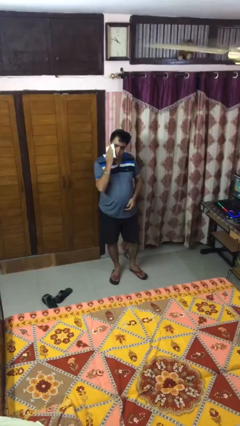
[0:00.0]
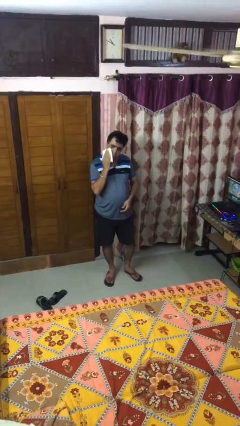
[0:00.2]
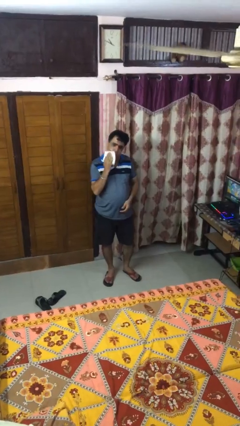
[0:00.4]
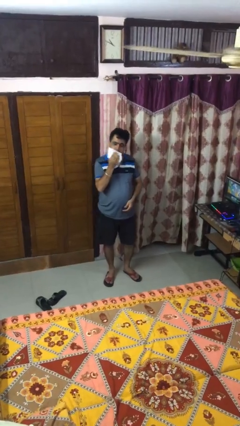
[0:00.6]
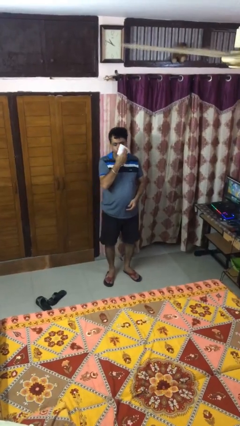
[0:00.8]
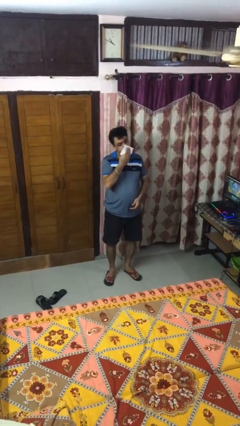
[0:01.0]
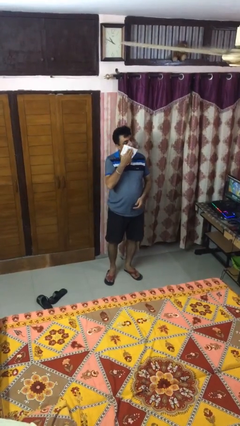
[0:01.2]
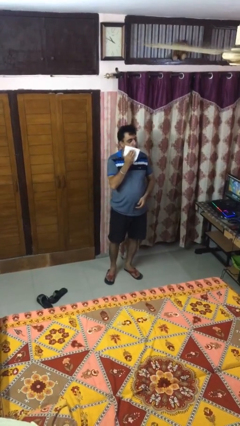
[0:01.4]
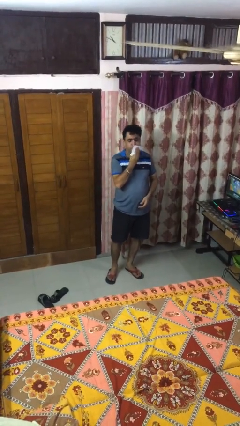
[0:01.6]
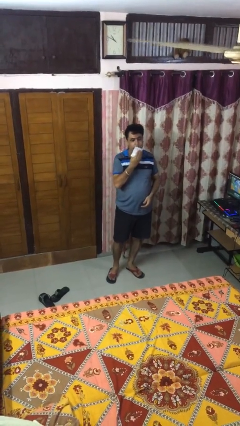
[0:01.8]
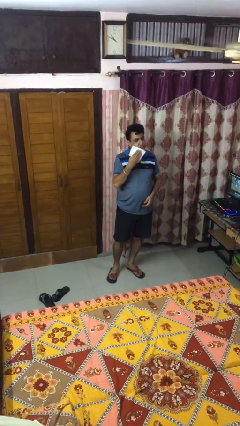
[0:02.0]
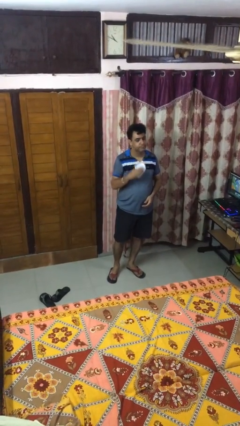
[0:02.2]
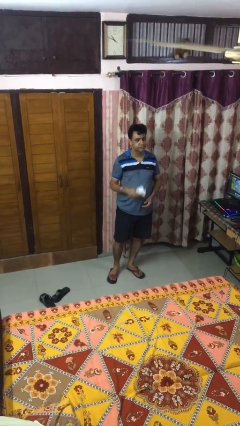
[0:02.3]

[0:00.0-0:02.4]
person wipes mouth with napkin

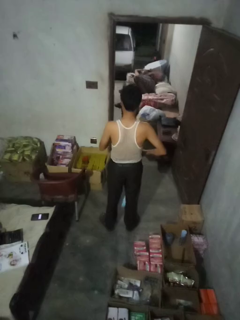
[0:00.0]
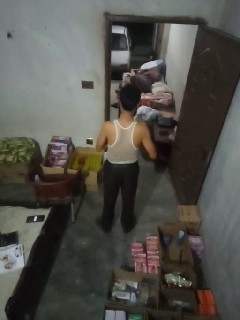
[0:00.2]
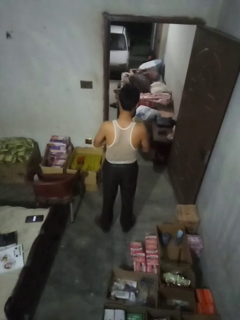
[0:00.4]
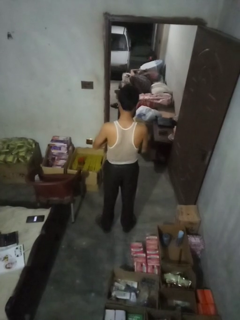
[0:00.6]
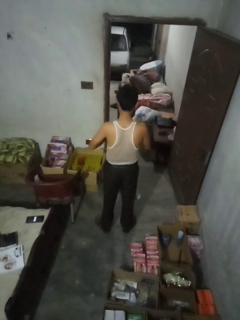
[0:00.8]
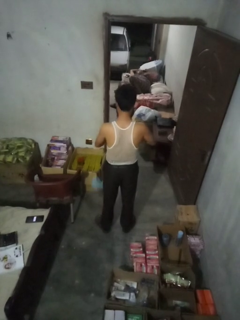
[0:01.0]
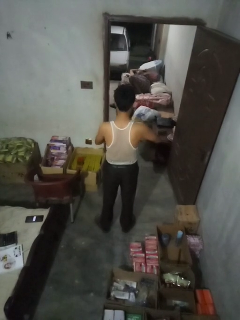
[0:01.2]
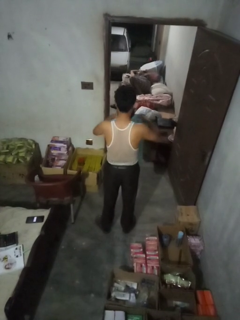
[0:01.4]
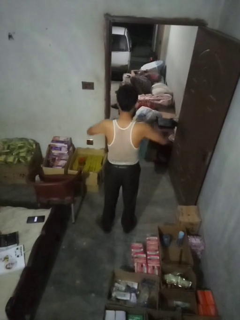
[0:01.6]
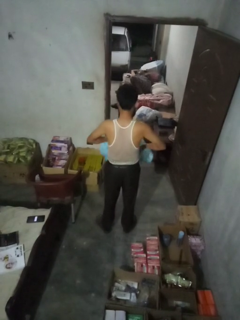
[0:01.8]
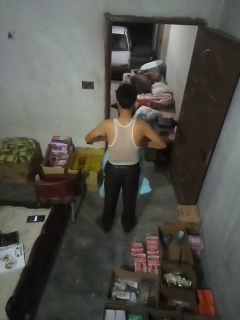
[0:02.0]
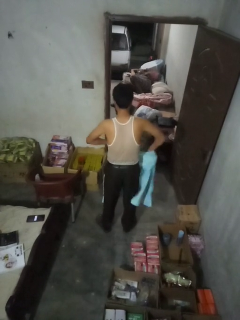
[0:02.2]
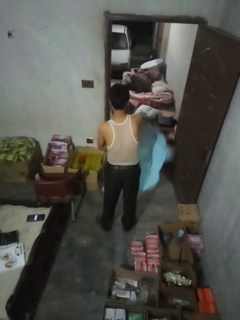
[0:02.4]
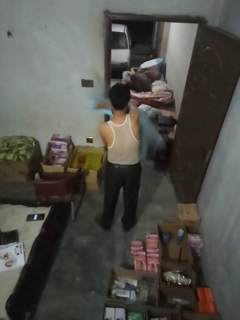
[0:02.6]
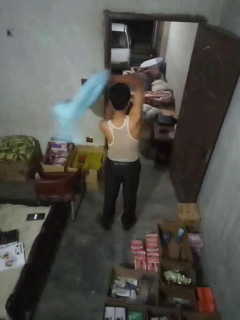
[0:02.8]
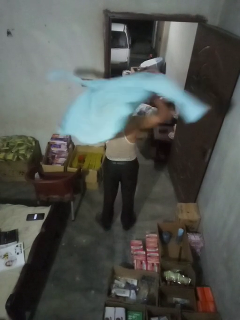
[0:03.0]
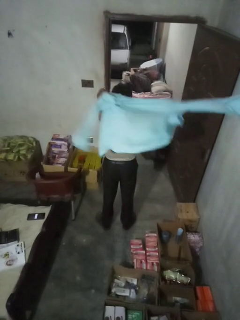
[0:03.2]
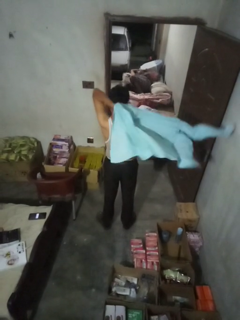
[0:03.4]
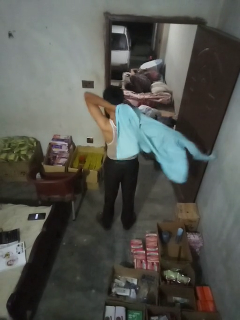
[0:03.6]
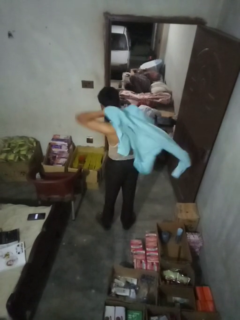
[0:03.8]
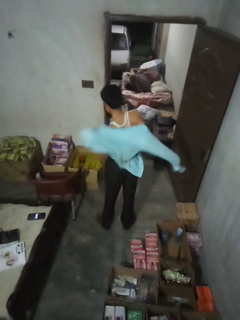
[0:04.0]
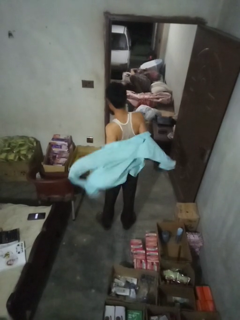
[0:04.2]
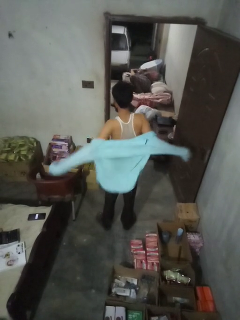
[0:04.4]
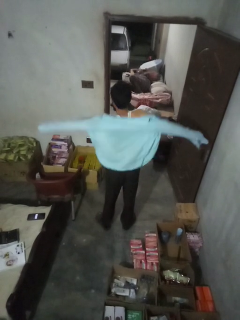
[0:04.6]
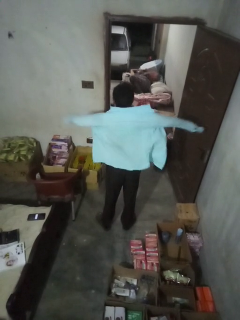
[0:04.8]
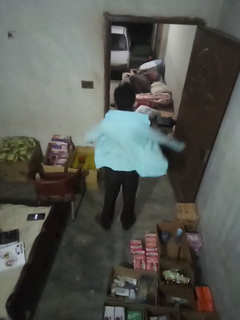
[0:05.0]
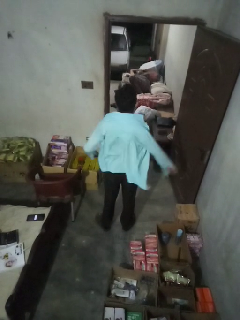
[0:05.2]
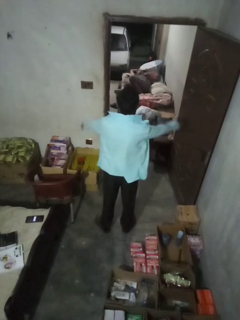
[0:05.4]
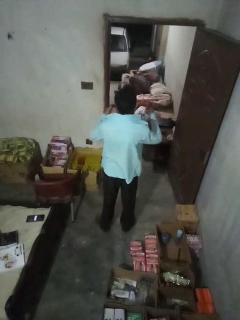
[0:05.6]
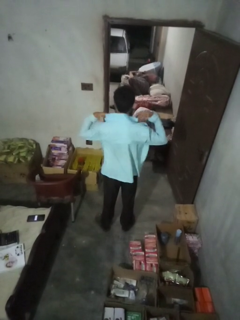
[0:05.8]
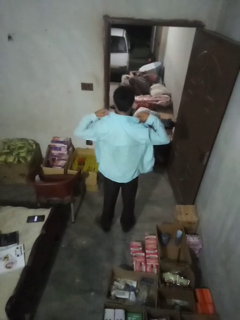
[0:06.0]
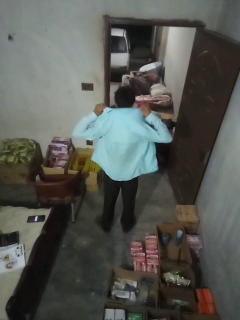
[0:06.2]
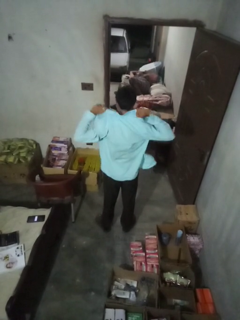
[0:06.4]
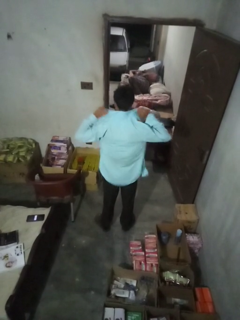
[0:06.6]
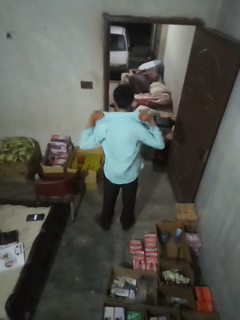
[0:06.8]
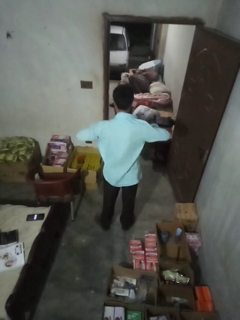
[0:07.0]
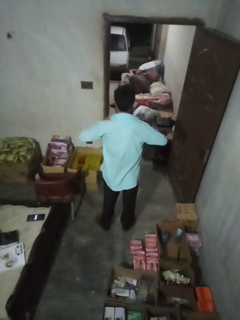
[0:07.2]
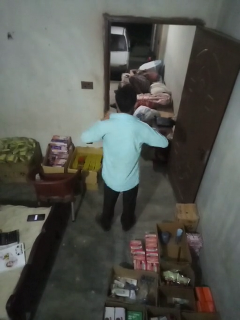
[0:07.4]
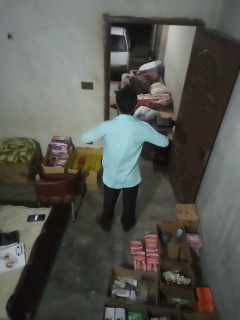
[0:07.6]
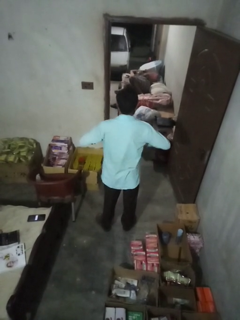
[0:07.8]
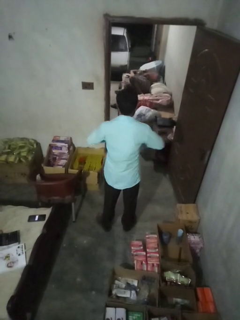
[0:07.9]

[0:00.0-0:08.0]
person puts on shirt

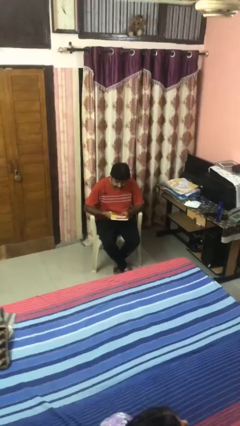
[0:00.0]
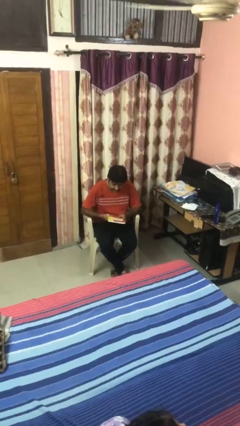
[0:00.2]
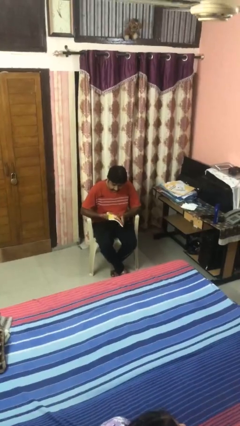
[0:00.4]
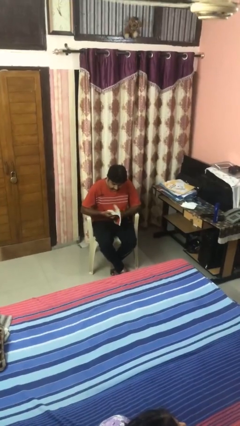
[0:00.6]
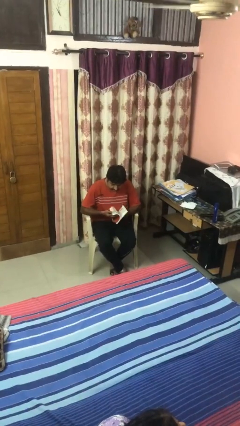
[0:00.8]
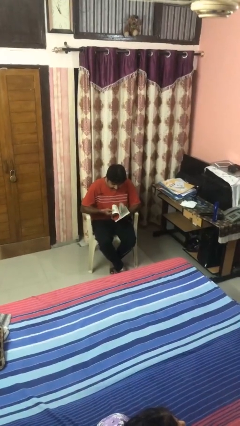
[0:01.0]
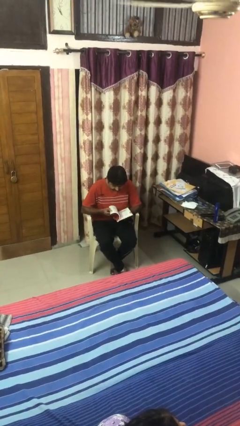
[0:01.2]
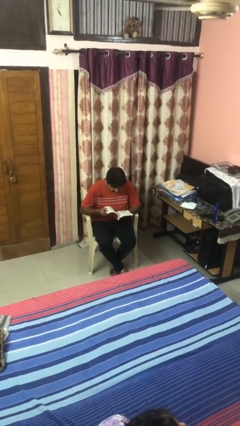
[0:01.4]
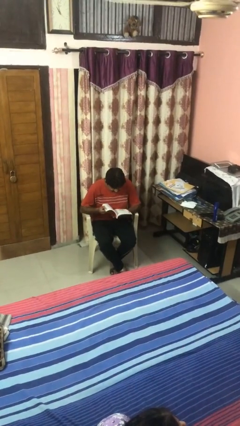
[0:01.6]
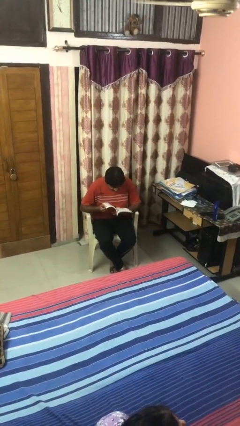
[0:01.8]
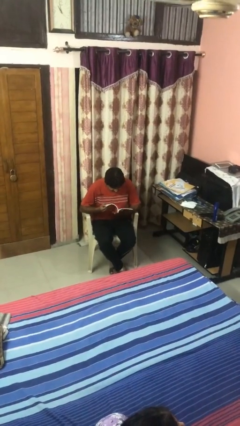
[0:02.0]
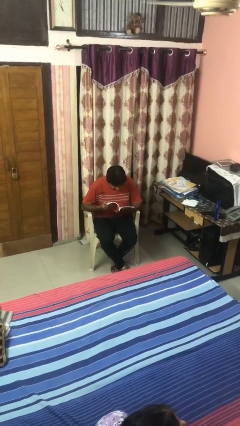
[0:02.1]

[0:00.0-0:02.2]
person reads magazine

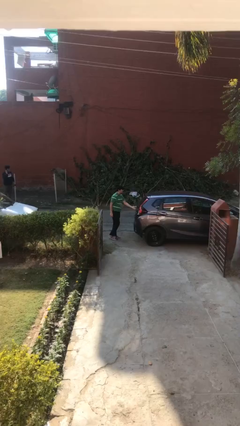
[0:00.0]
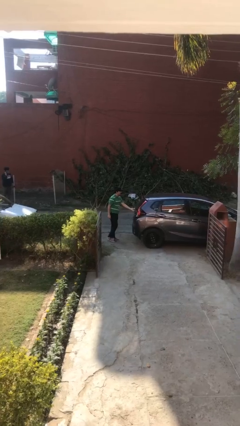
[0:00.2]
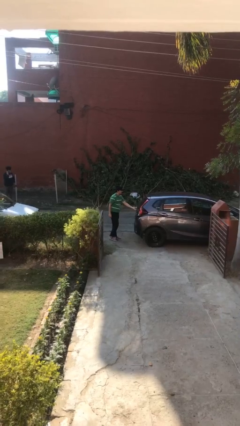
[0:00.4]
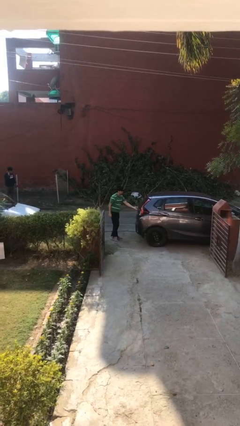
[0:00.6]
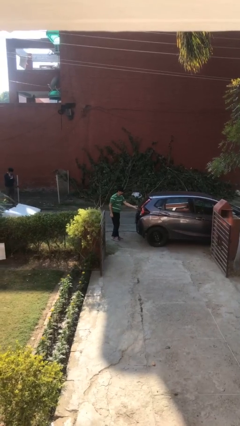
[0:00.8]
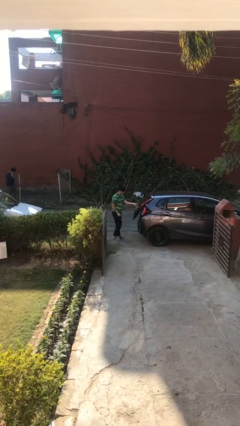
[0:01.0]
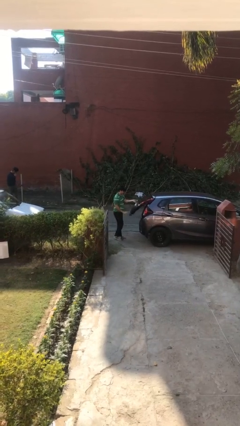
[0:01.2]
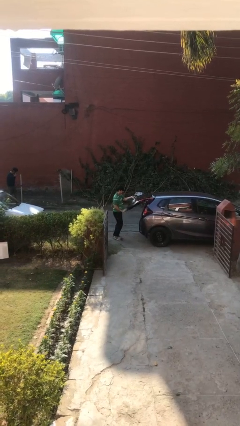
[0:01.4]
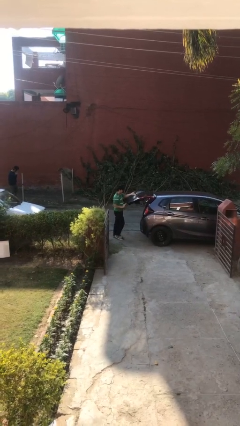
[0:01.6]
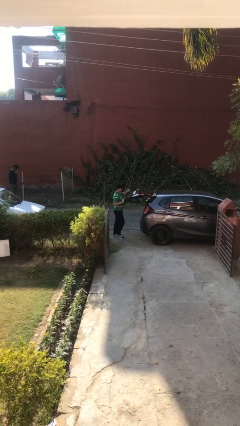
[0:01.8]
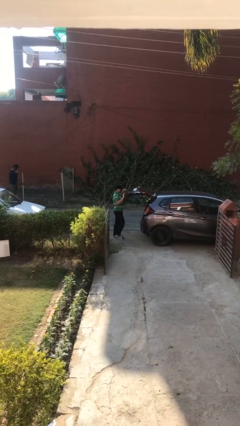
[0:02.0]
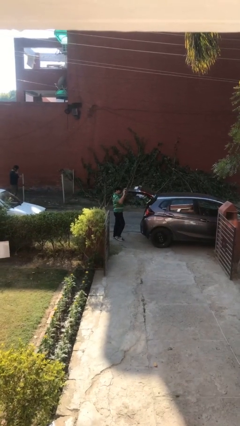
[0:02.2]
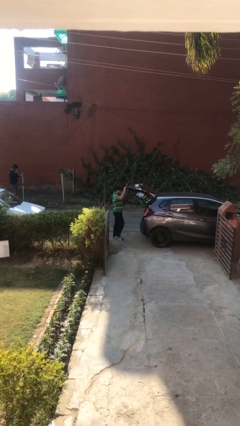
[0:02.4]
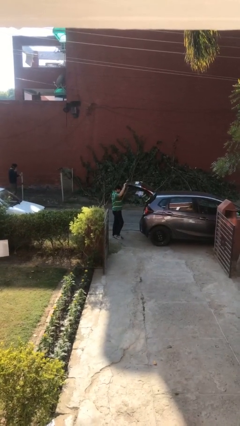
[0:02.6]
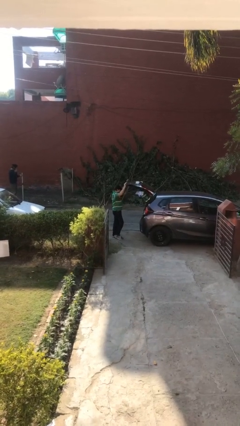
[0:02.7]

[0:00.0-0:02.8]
person opens car trunk

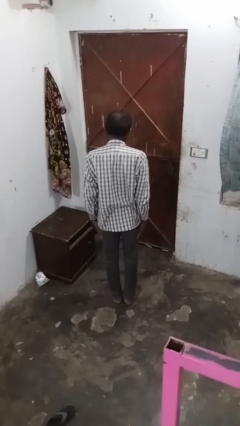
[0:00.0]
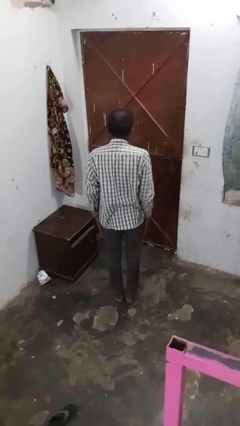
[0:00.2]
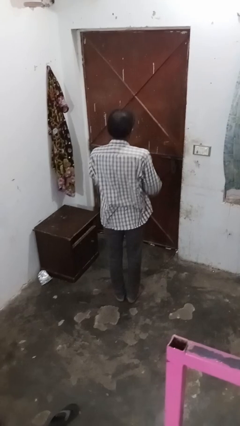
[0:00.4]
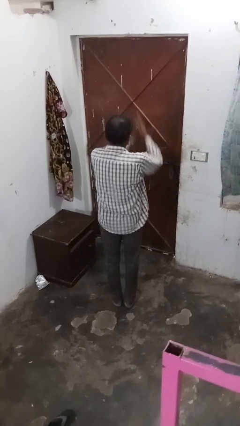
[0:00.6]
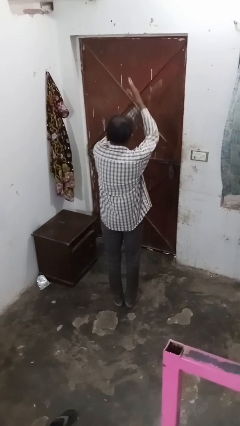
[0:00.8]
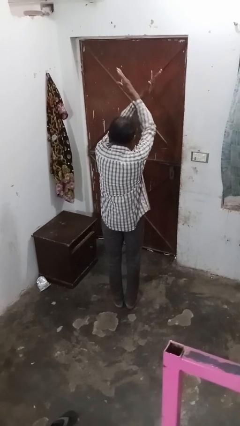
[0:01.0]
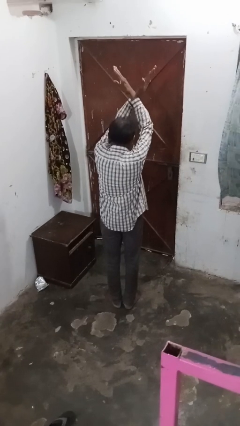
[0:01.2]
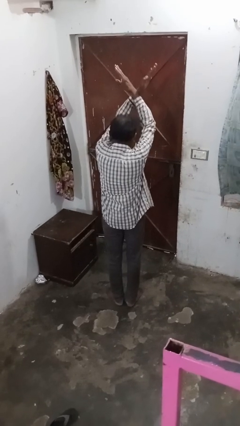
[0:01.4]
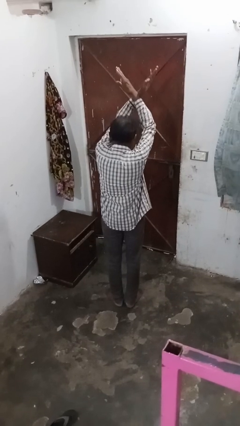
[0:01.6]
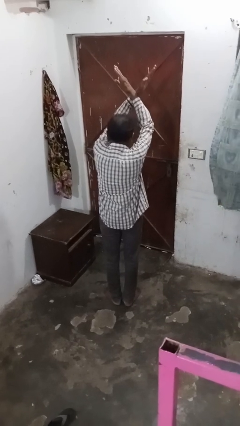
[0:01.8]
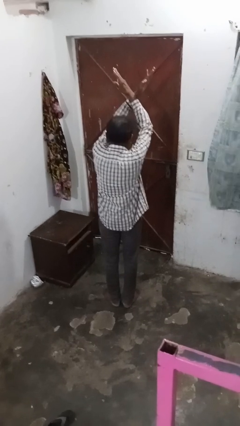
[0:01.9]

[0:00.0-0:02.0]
person gestures arms x

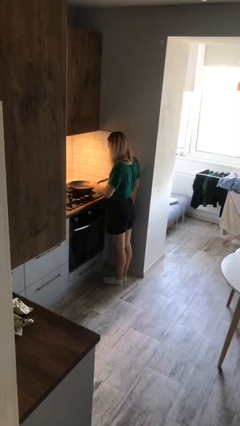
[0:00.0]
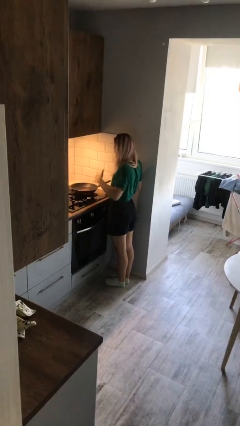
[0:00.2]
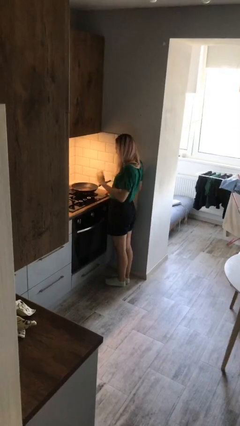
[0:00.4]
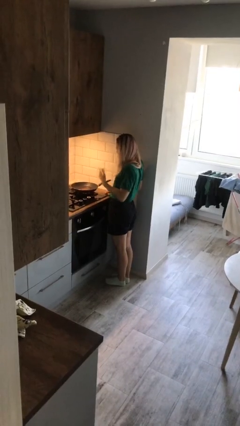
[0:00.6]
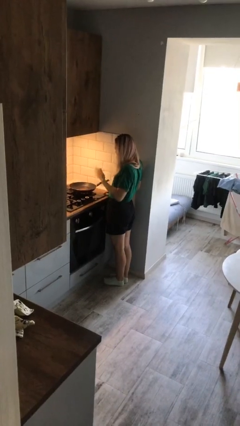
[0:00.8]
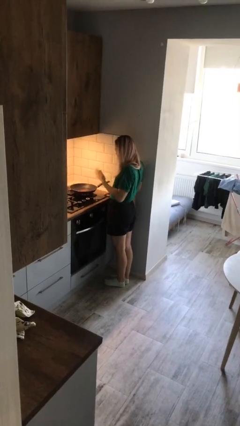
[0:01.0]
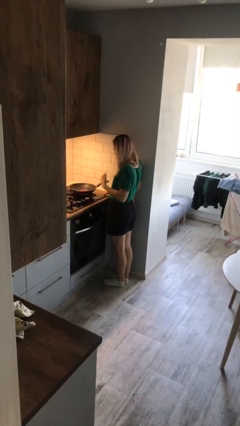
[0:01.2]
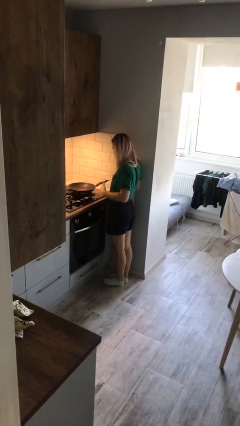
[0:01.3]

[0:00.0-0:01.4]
person burns hand

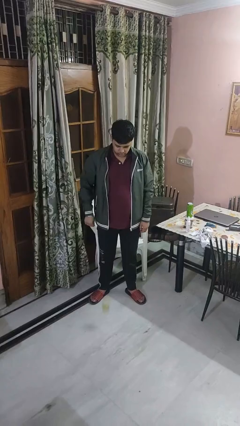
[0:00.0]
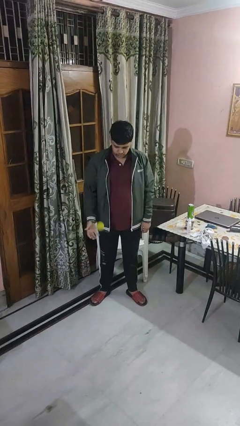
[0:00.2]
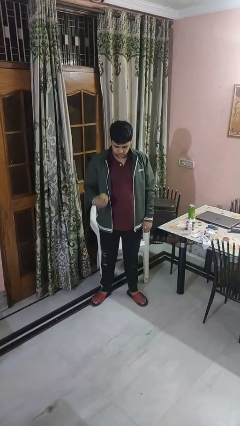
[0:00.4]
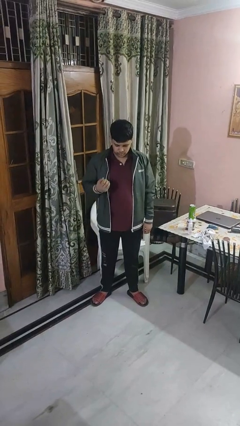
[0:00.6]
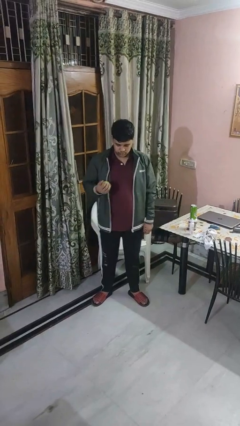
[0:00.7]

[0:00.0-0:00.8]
person bounces ball on floor
